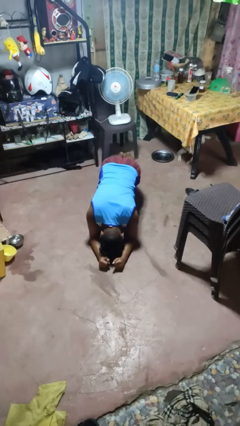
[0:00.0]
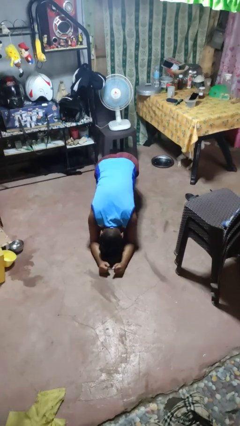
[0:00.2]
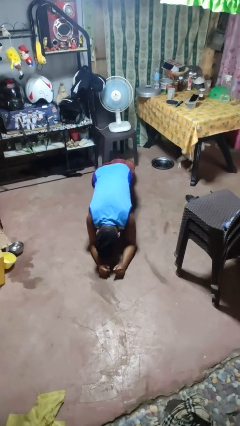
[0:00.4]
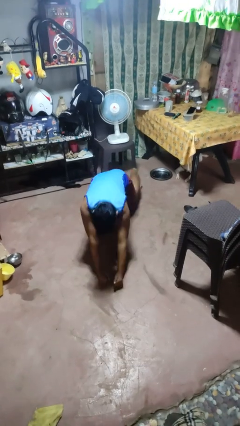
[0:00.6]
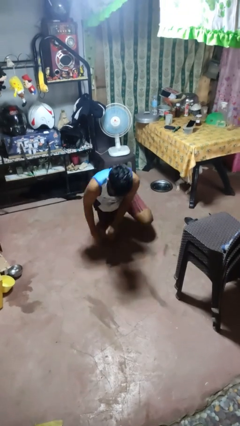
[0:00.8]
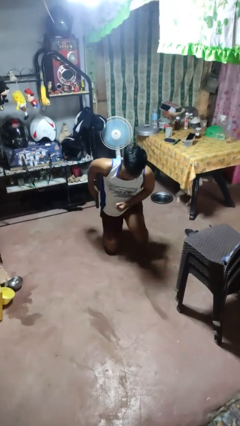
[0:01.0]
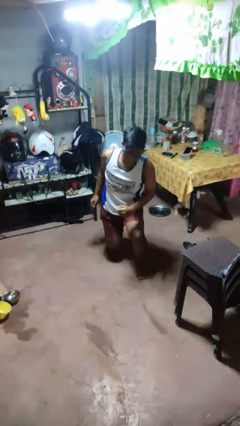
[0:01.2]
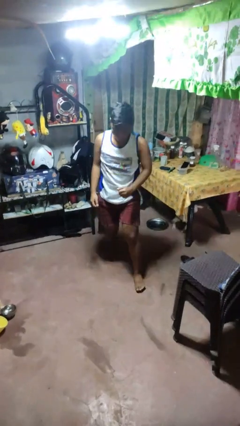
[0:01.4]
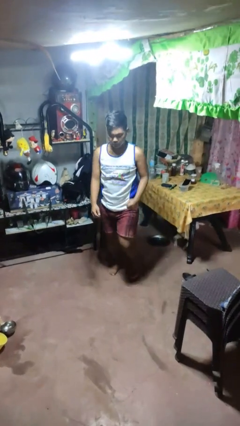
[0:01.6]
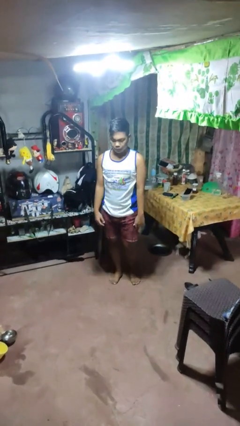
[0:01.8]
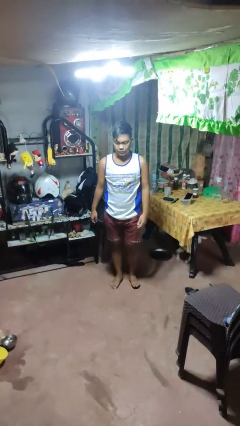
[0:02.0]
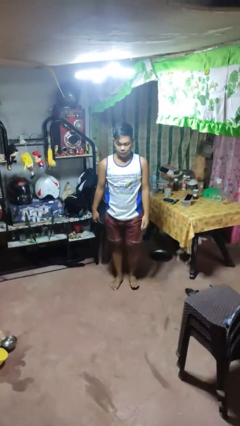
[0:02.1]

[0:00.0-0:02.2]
person stands up from floor

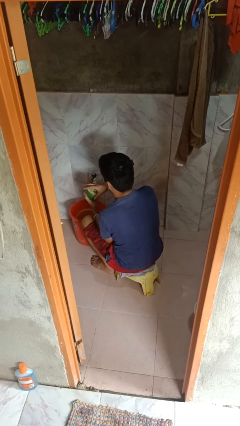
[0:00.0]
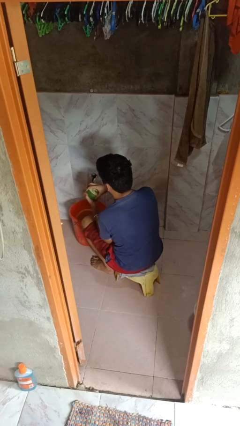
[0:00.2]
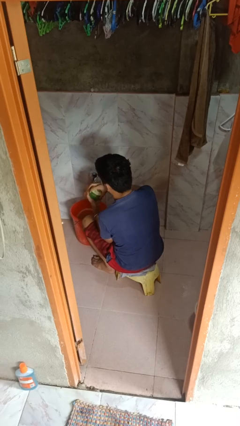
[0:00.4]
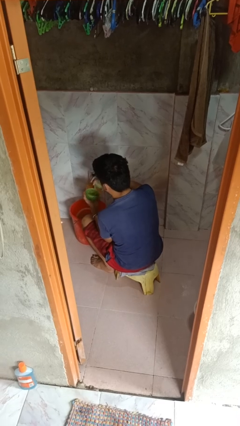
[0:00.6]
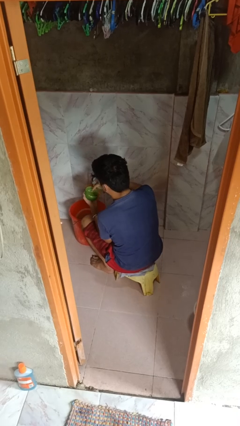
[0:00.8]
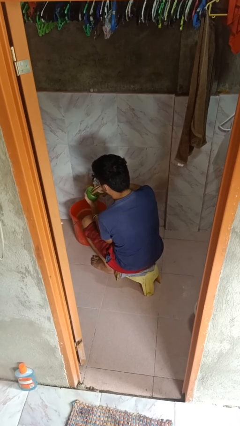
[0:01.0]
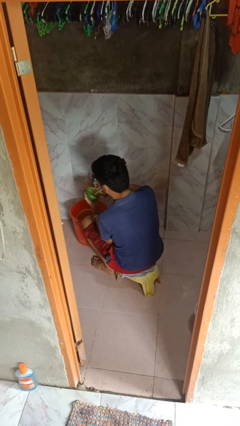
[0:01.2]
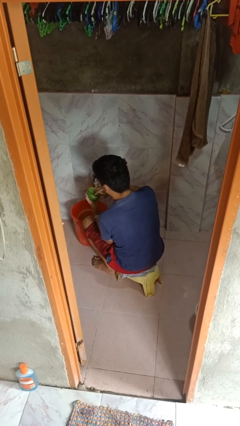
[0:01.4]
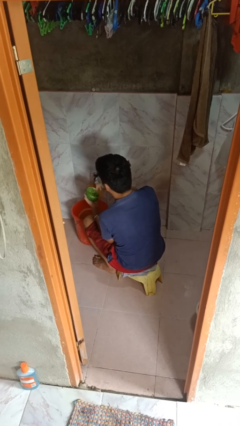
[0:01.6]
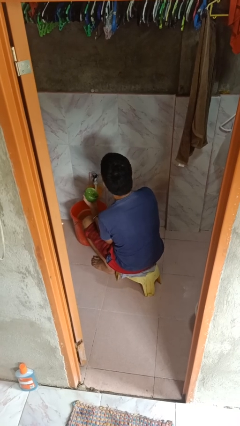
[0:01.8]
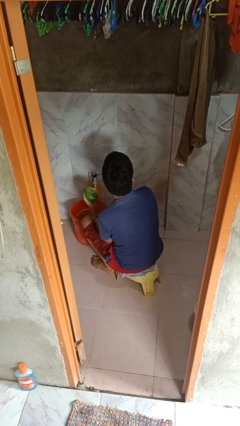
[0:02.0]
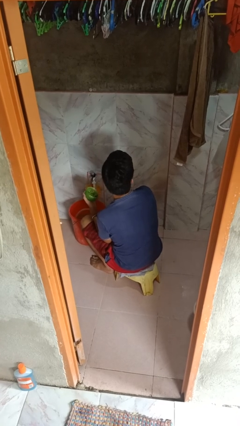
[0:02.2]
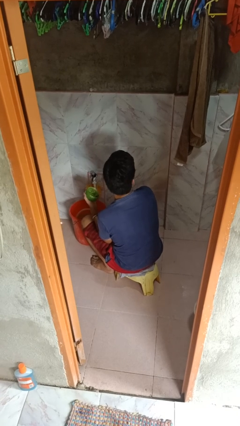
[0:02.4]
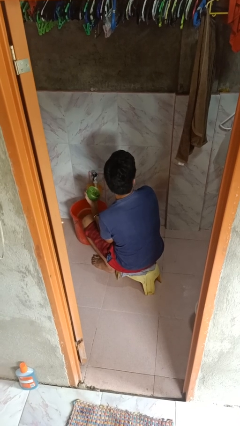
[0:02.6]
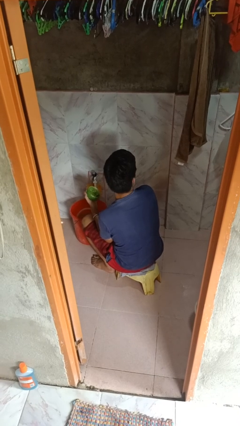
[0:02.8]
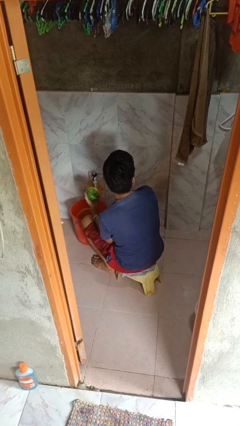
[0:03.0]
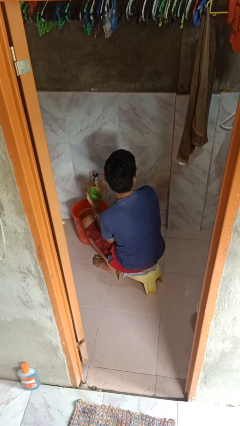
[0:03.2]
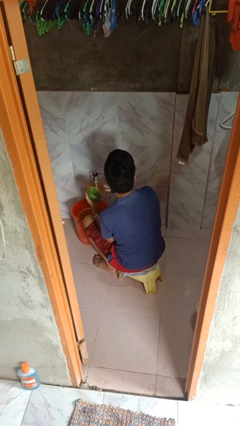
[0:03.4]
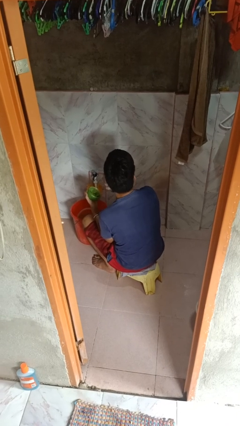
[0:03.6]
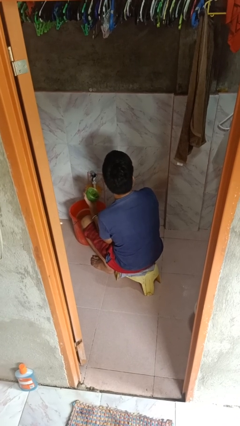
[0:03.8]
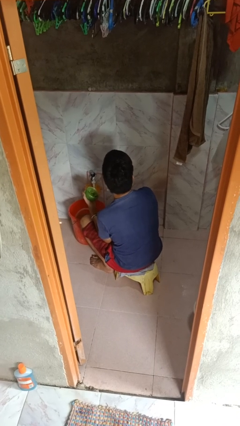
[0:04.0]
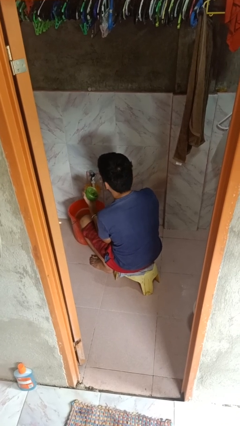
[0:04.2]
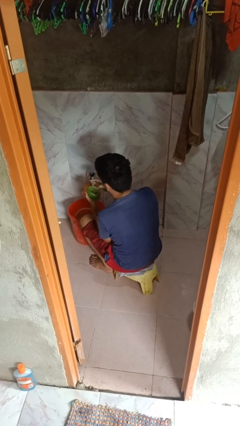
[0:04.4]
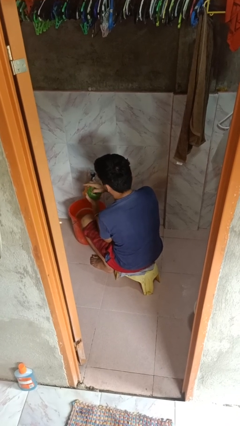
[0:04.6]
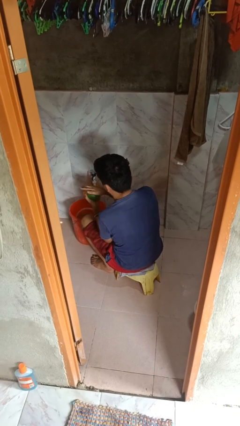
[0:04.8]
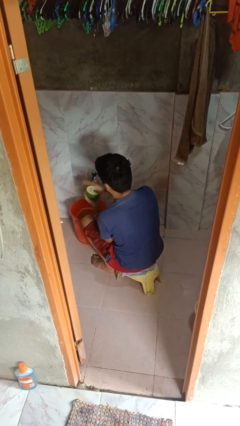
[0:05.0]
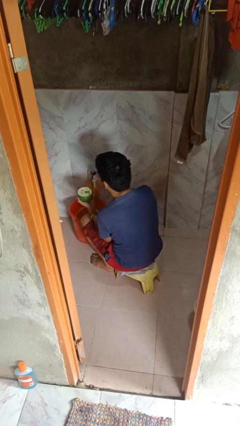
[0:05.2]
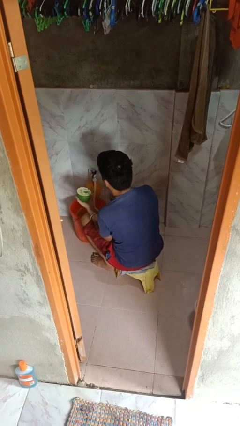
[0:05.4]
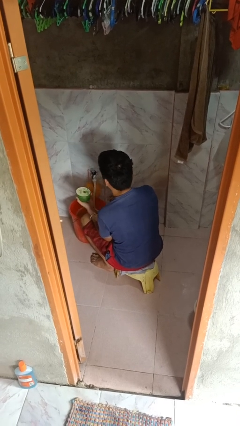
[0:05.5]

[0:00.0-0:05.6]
person applies facial moisturizer

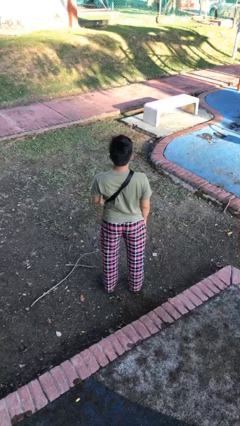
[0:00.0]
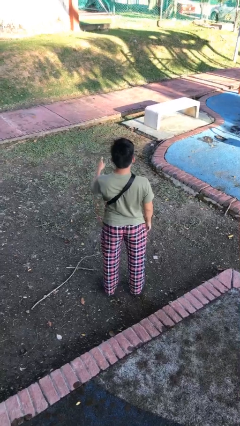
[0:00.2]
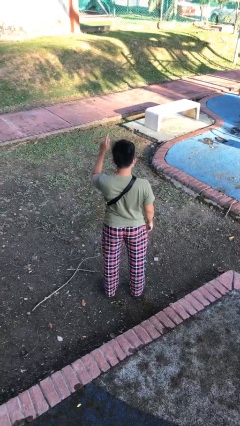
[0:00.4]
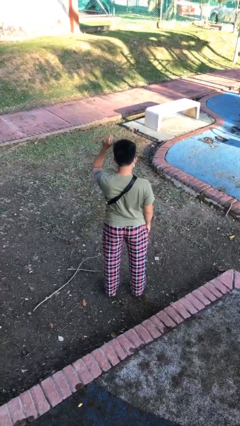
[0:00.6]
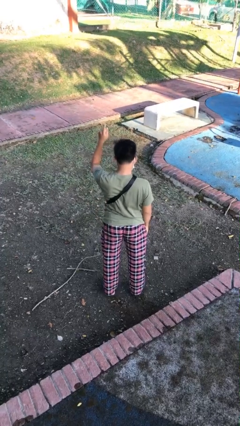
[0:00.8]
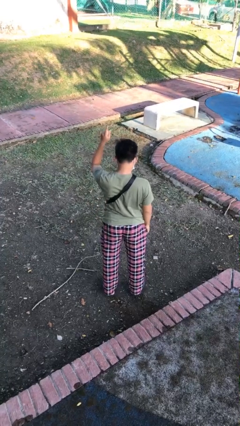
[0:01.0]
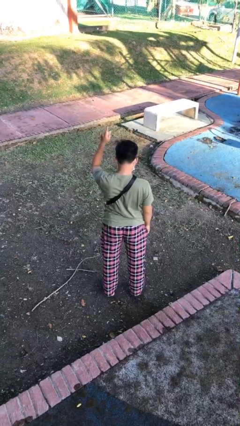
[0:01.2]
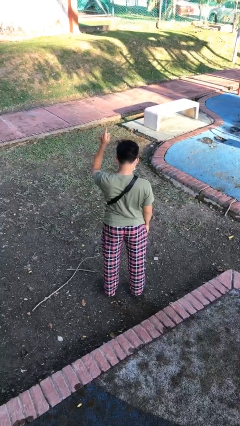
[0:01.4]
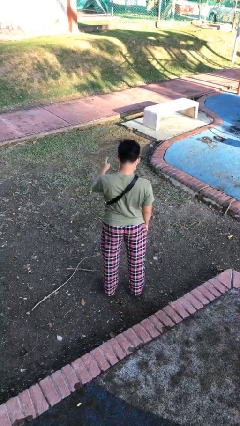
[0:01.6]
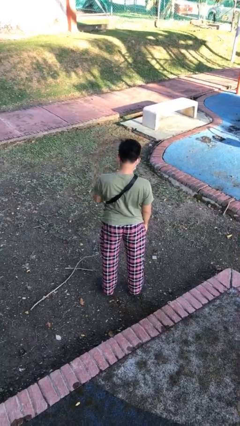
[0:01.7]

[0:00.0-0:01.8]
person gestures number one

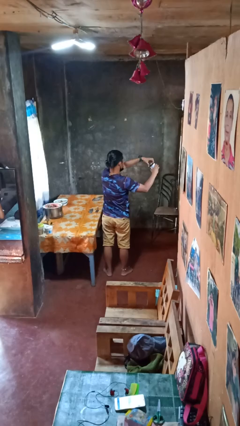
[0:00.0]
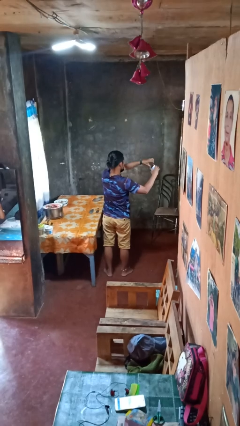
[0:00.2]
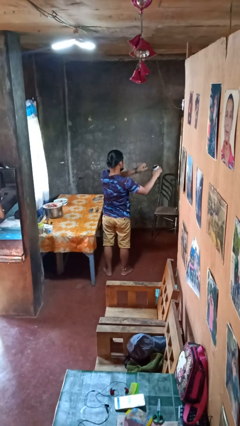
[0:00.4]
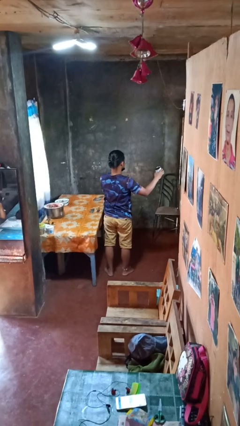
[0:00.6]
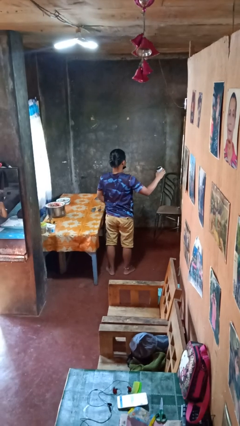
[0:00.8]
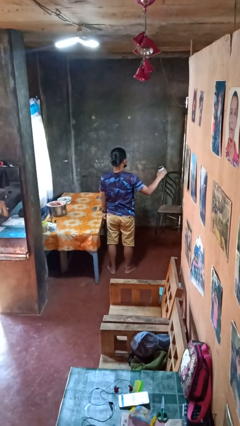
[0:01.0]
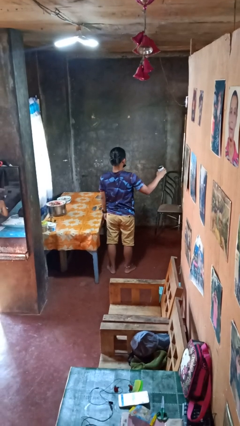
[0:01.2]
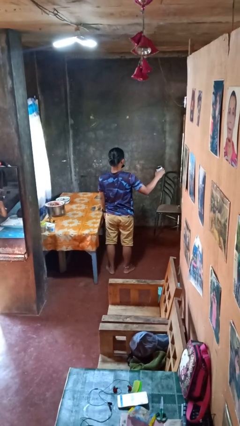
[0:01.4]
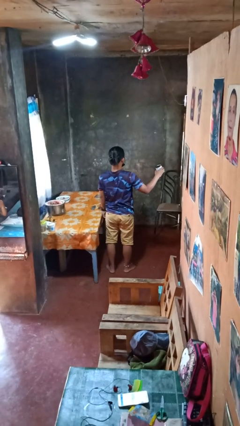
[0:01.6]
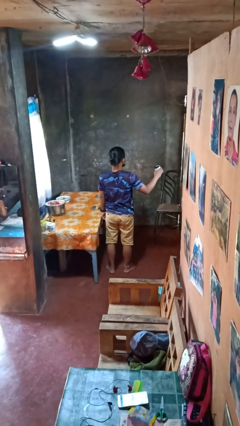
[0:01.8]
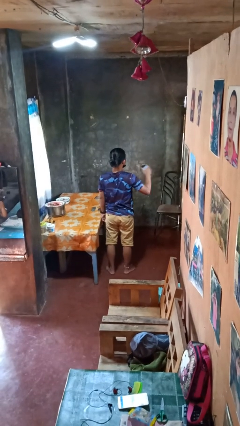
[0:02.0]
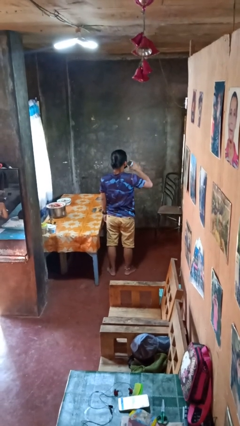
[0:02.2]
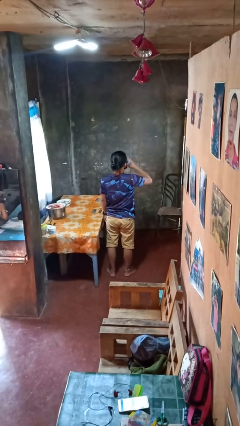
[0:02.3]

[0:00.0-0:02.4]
person opens beverage can

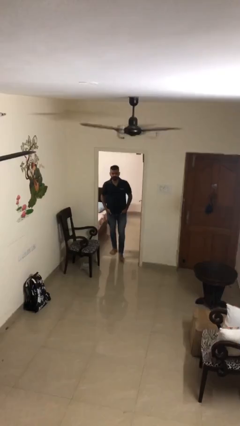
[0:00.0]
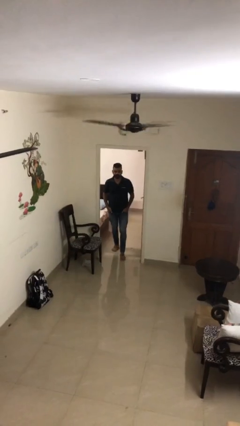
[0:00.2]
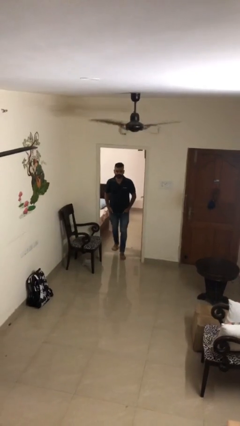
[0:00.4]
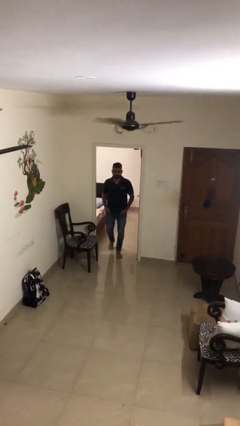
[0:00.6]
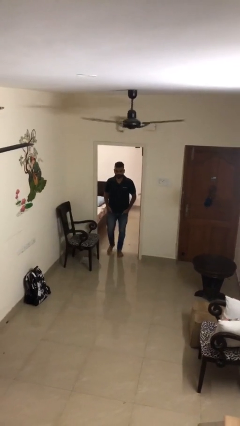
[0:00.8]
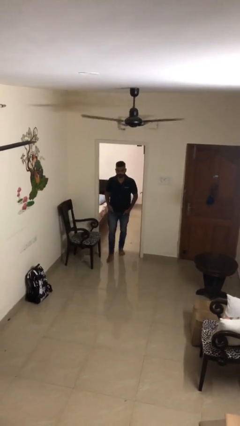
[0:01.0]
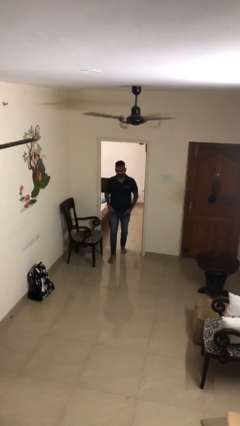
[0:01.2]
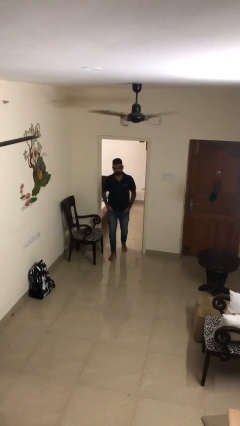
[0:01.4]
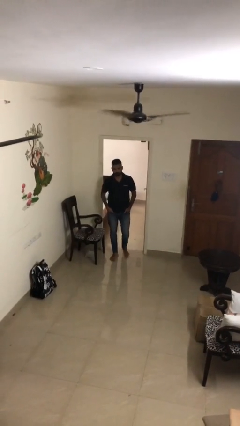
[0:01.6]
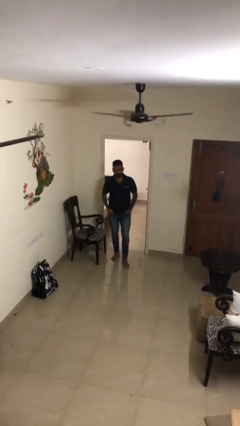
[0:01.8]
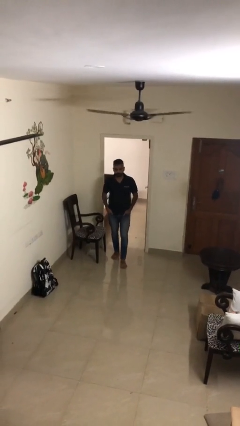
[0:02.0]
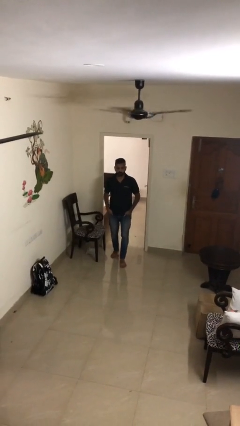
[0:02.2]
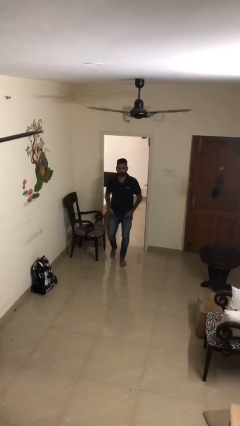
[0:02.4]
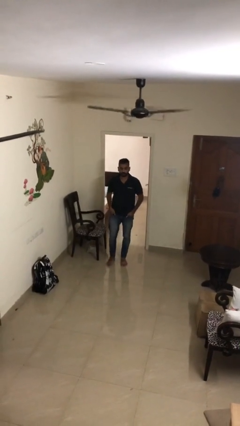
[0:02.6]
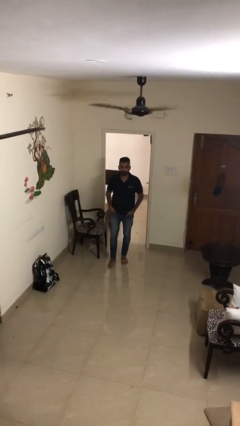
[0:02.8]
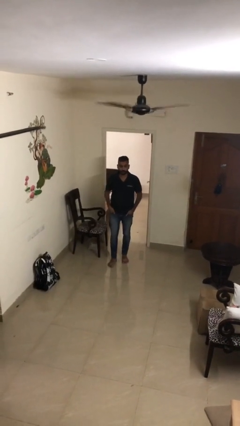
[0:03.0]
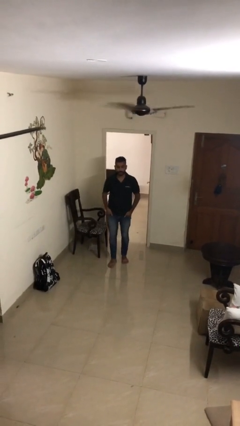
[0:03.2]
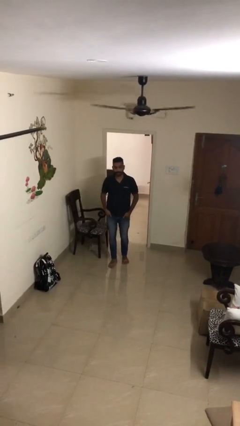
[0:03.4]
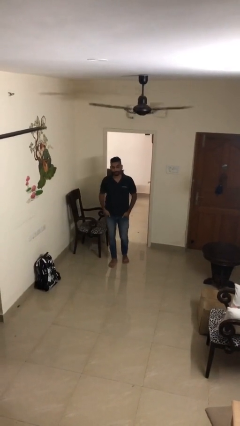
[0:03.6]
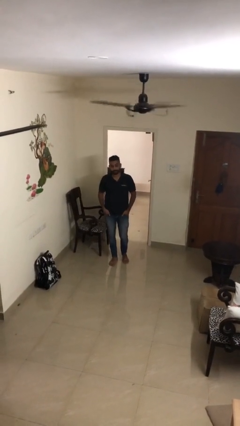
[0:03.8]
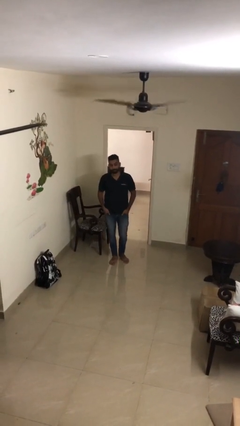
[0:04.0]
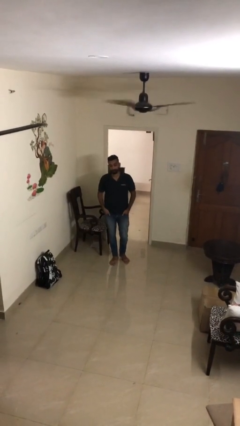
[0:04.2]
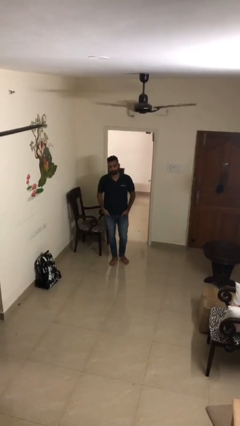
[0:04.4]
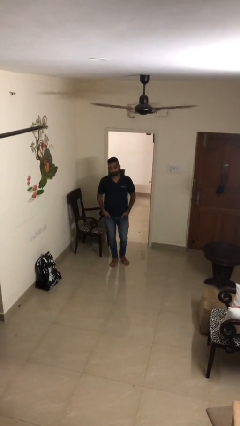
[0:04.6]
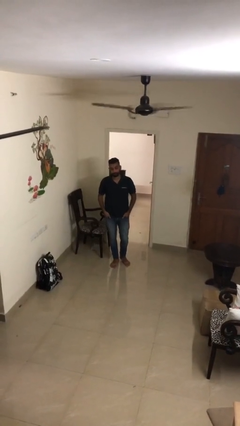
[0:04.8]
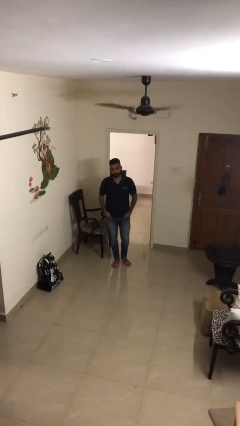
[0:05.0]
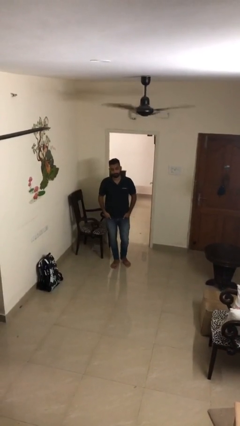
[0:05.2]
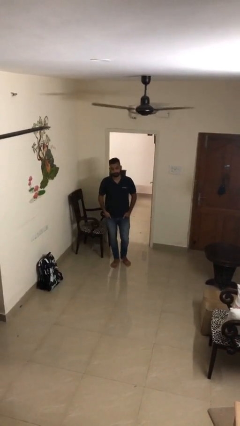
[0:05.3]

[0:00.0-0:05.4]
person enters scene through structure

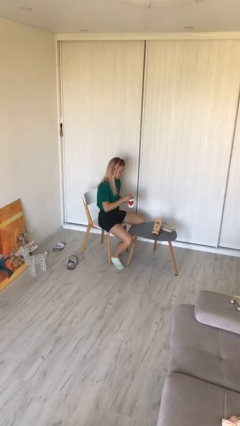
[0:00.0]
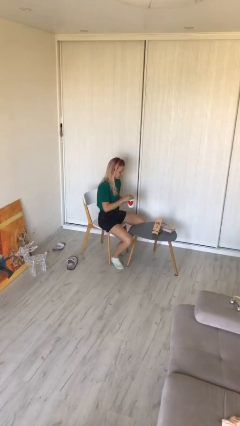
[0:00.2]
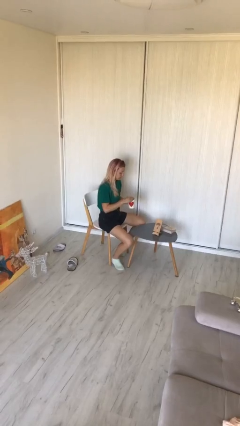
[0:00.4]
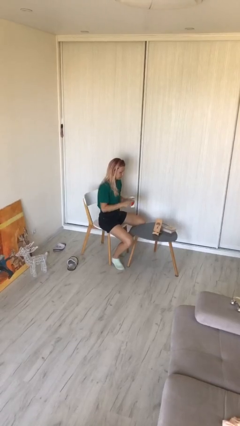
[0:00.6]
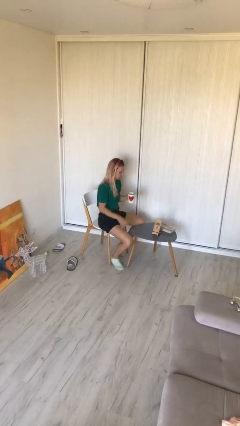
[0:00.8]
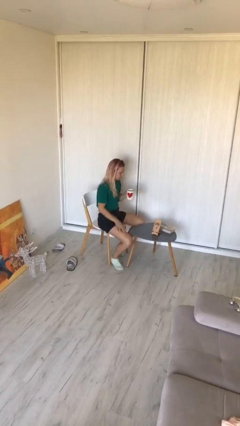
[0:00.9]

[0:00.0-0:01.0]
person stirs mug
